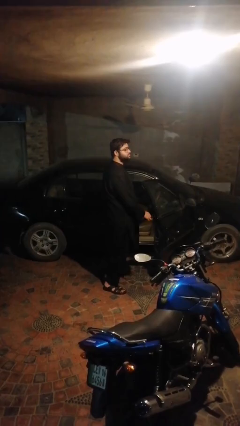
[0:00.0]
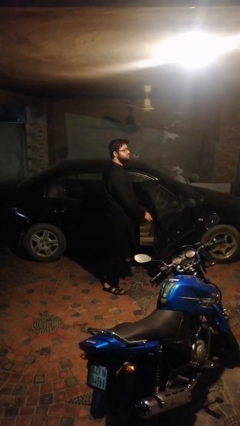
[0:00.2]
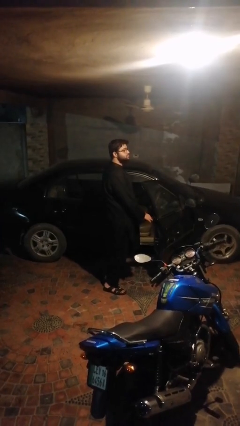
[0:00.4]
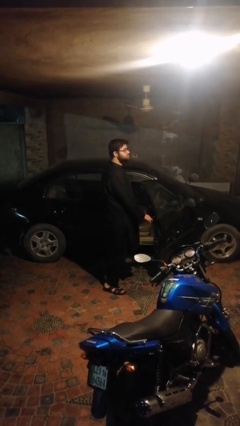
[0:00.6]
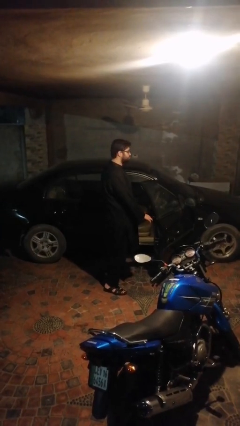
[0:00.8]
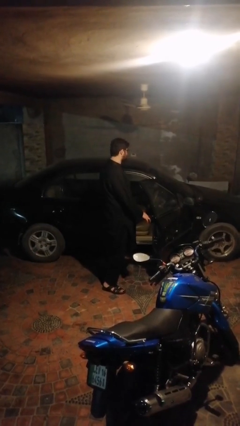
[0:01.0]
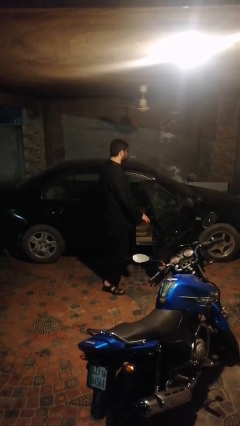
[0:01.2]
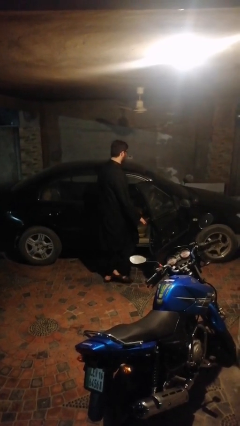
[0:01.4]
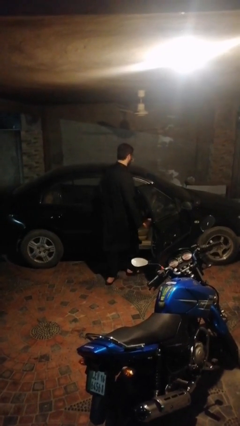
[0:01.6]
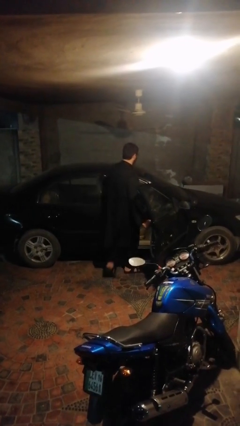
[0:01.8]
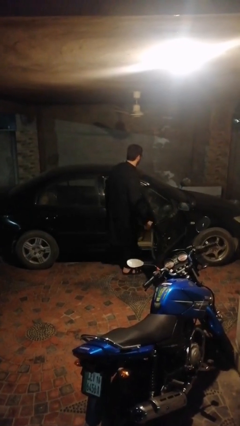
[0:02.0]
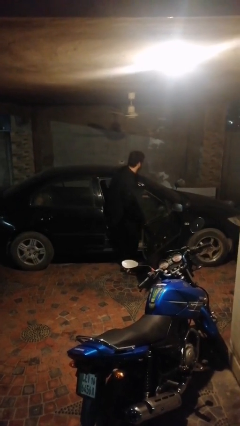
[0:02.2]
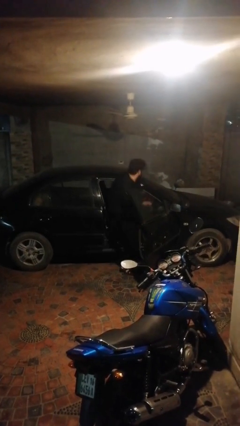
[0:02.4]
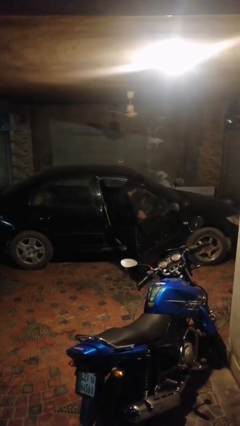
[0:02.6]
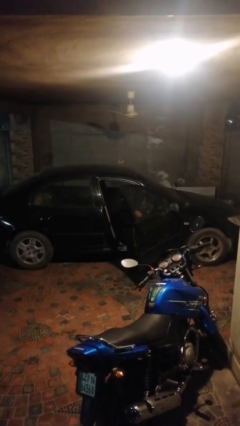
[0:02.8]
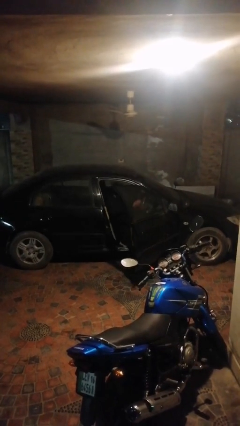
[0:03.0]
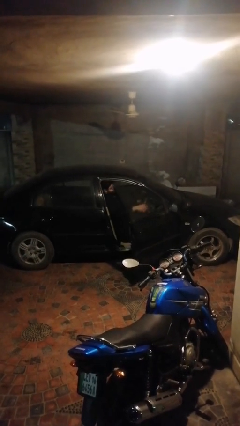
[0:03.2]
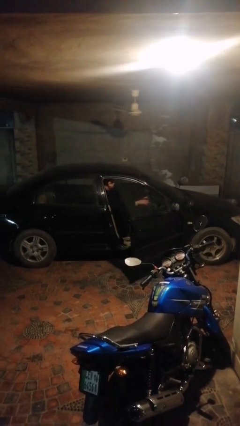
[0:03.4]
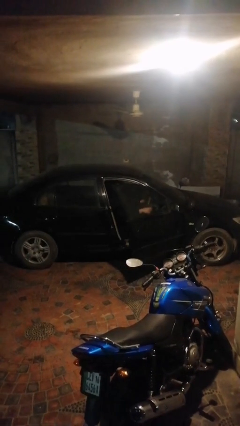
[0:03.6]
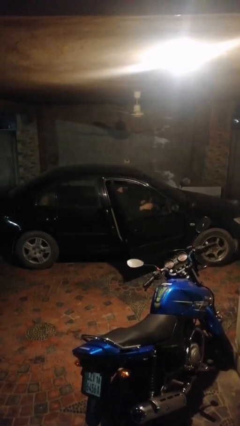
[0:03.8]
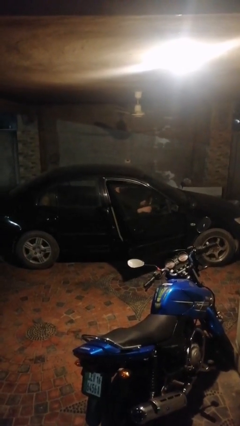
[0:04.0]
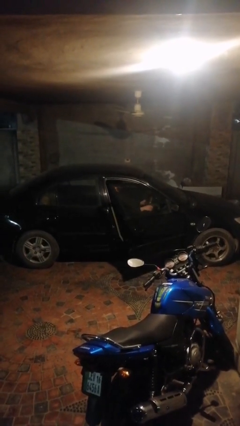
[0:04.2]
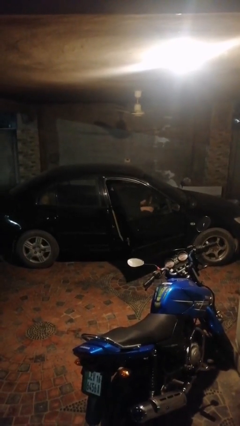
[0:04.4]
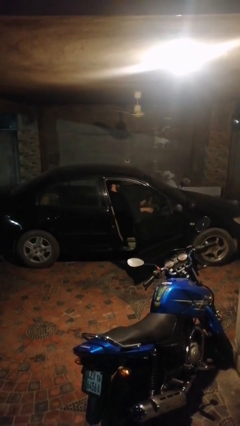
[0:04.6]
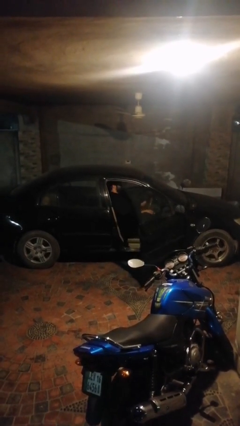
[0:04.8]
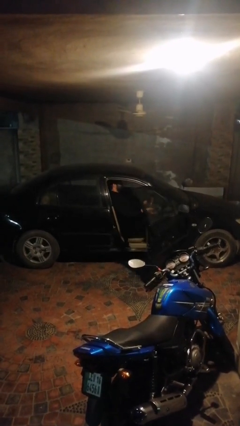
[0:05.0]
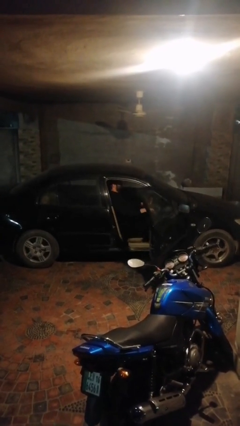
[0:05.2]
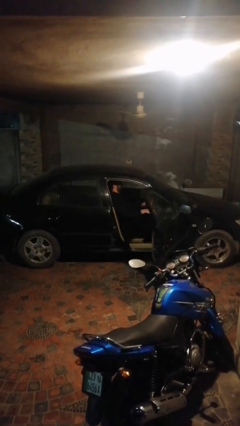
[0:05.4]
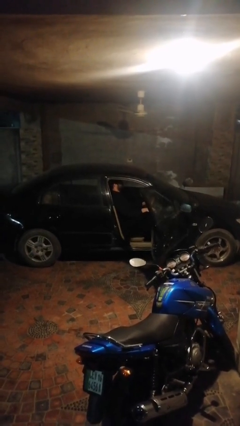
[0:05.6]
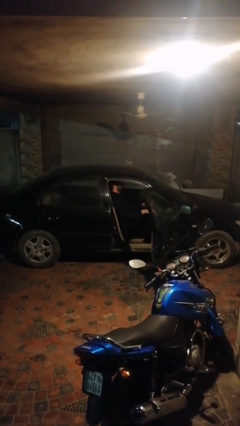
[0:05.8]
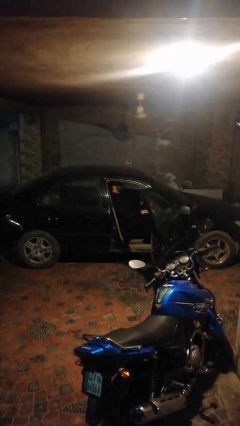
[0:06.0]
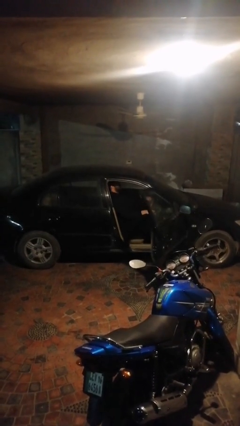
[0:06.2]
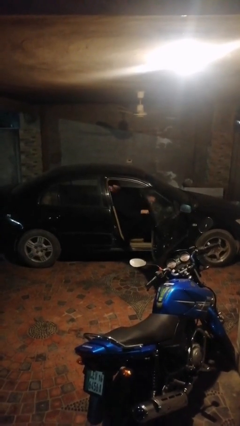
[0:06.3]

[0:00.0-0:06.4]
person enters car

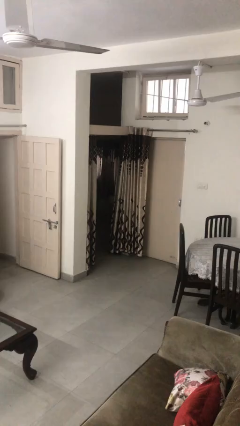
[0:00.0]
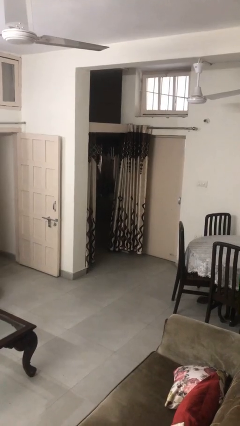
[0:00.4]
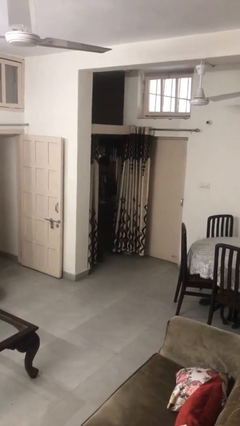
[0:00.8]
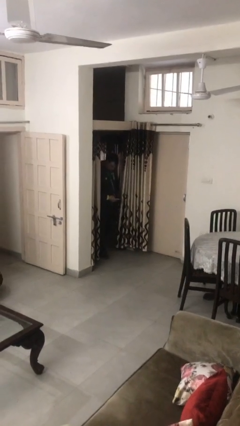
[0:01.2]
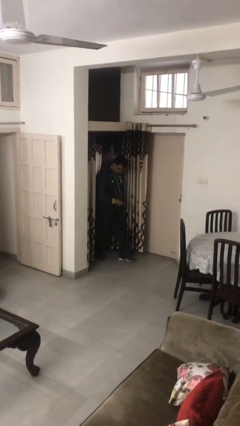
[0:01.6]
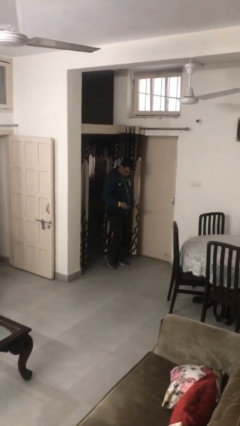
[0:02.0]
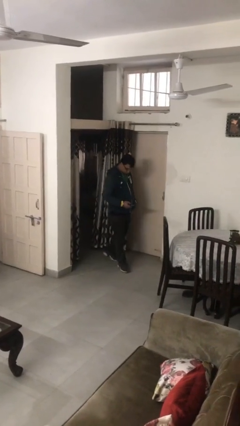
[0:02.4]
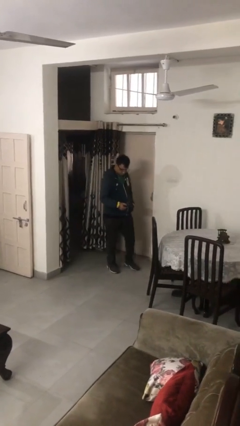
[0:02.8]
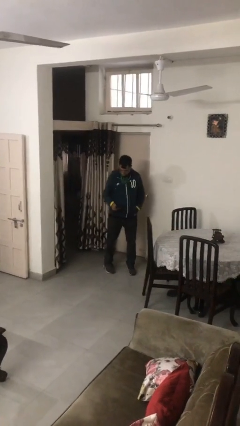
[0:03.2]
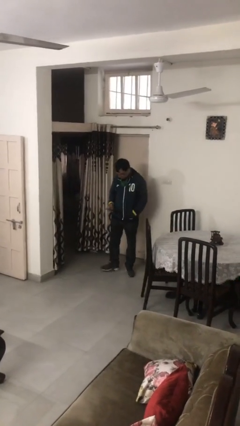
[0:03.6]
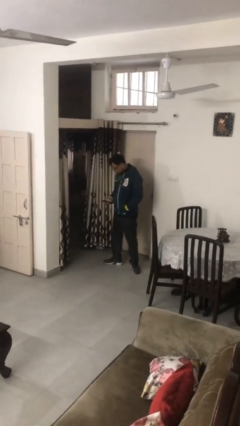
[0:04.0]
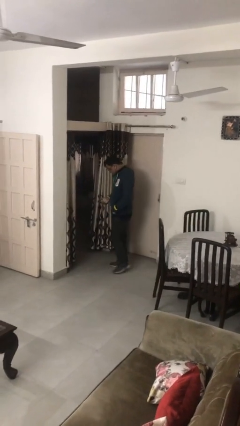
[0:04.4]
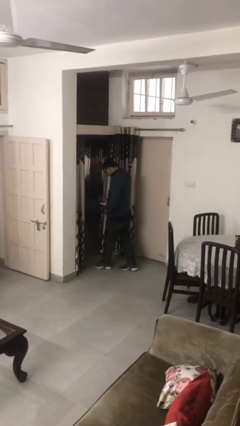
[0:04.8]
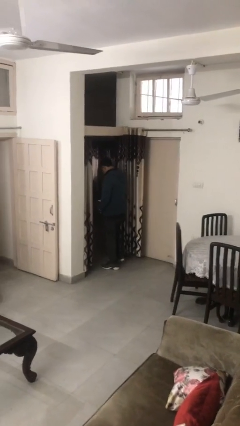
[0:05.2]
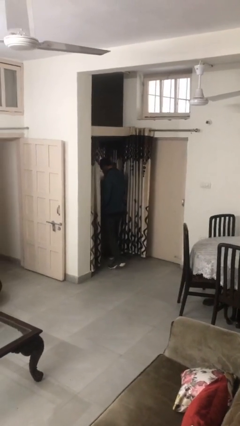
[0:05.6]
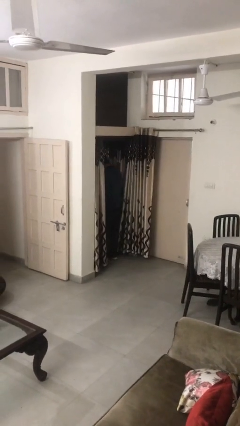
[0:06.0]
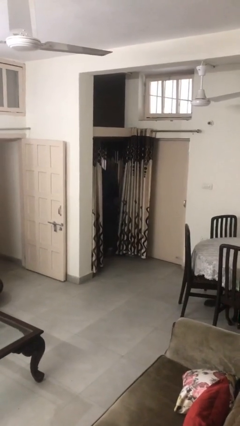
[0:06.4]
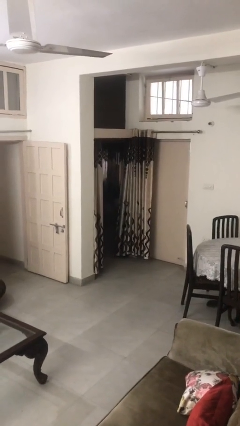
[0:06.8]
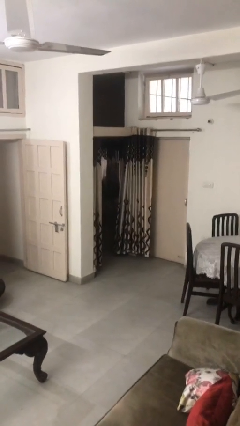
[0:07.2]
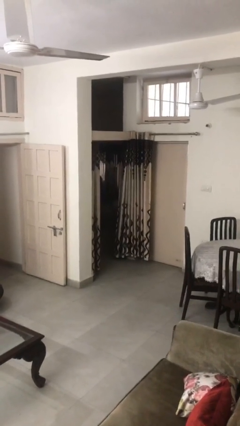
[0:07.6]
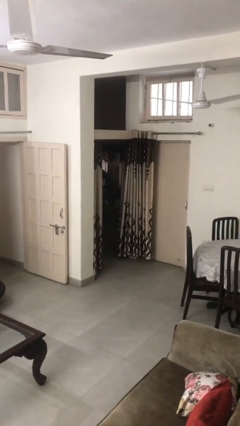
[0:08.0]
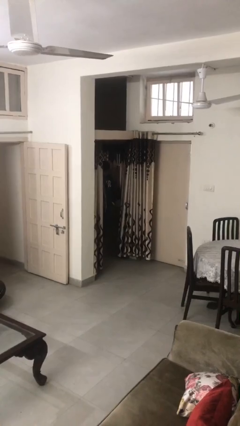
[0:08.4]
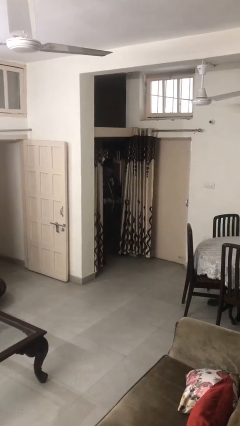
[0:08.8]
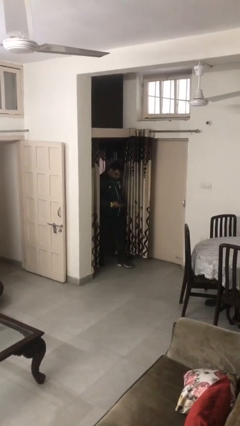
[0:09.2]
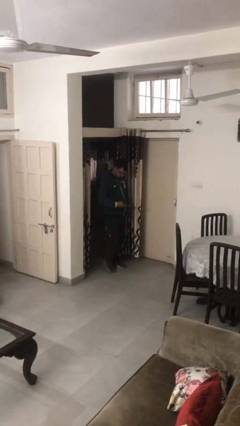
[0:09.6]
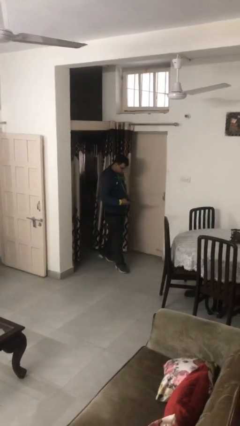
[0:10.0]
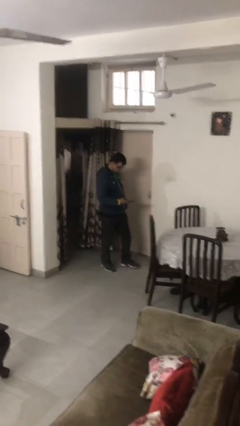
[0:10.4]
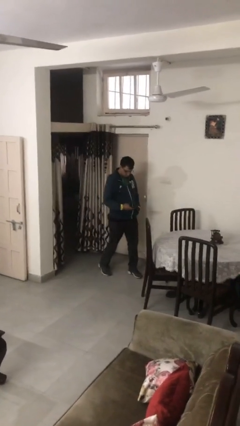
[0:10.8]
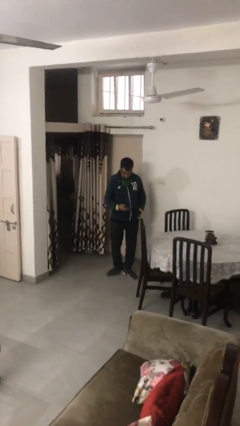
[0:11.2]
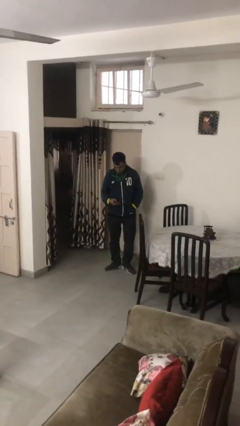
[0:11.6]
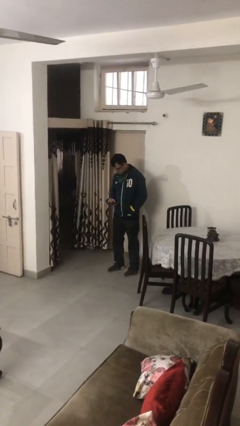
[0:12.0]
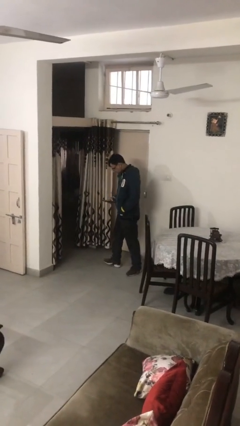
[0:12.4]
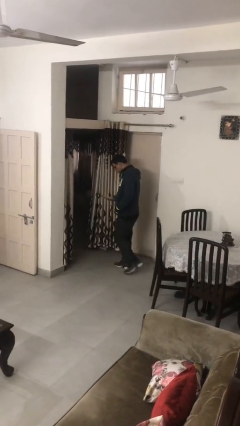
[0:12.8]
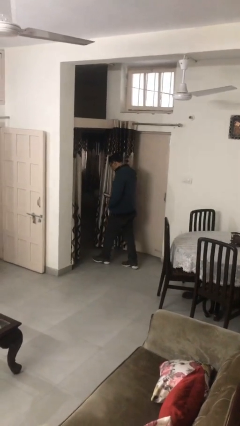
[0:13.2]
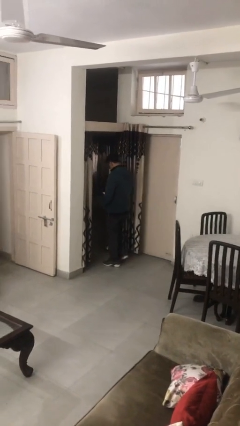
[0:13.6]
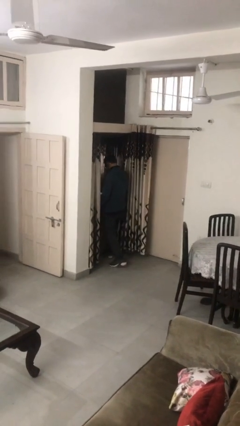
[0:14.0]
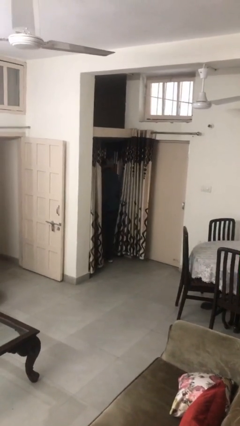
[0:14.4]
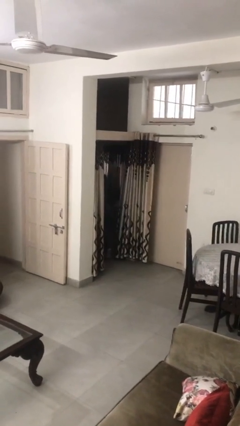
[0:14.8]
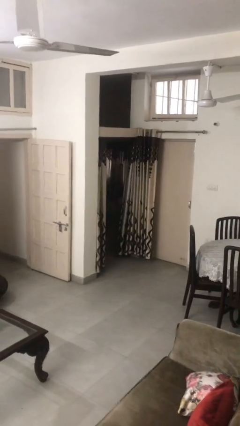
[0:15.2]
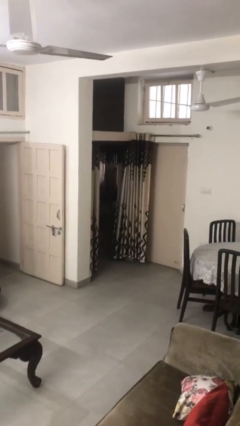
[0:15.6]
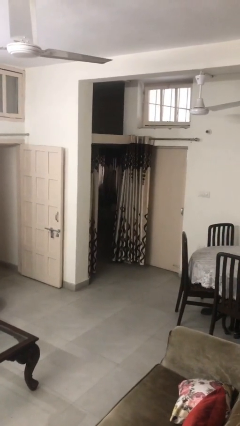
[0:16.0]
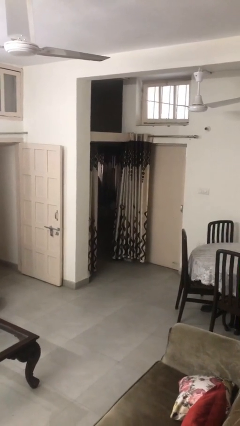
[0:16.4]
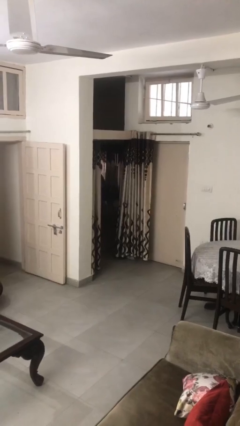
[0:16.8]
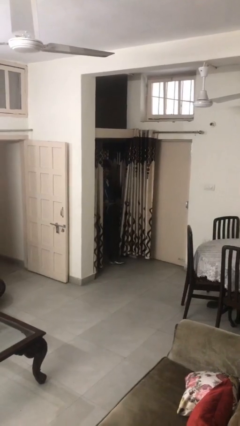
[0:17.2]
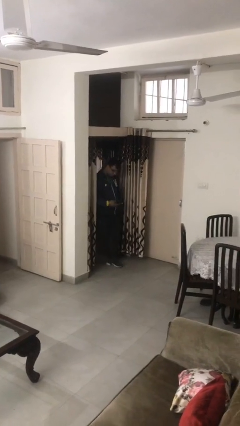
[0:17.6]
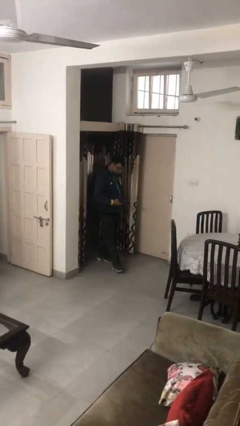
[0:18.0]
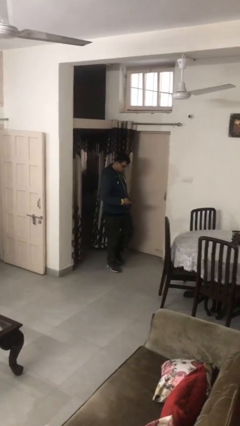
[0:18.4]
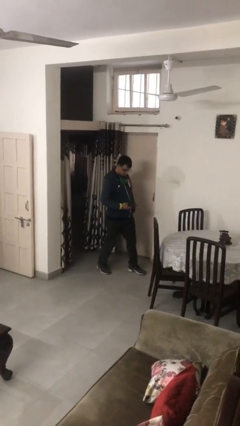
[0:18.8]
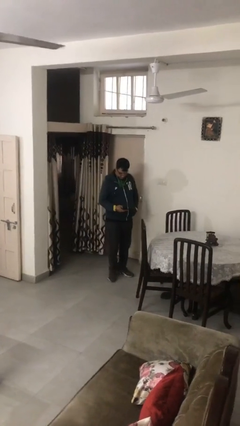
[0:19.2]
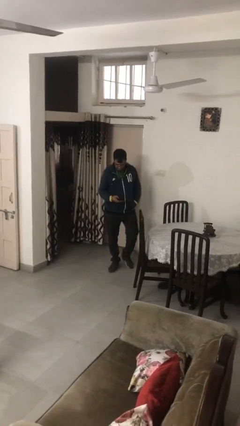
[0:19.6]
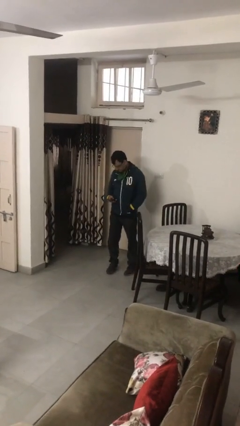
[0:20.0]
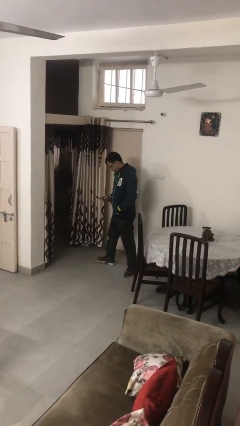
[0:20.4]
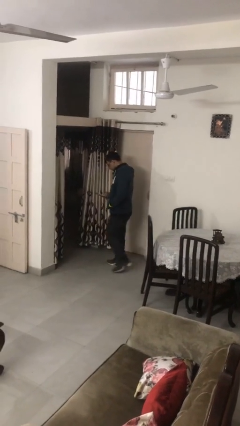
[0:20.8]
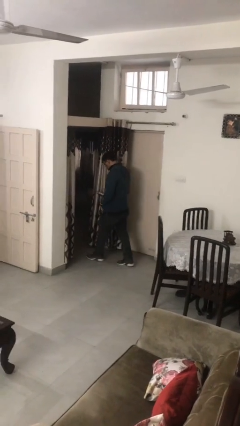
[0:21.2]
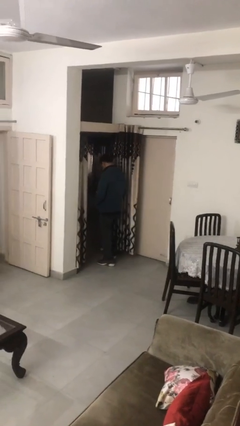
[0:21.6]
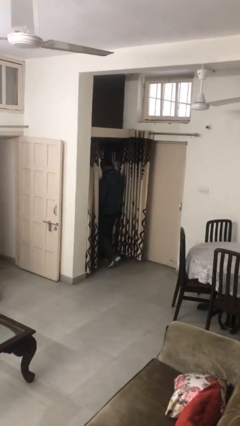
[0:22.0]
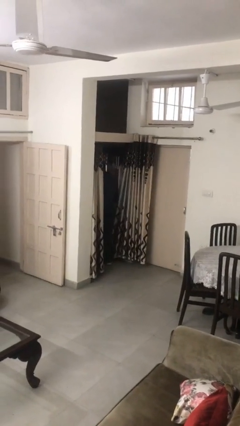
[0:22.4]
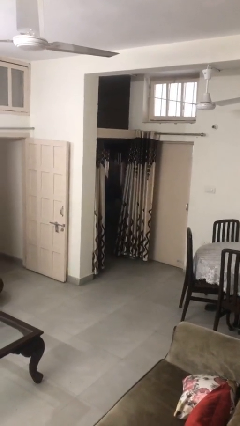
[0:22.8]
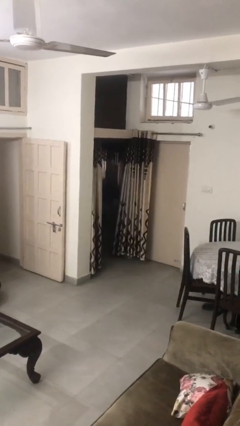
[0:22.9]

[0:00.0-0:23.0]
person texts on phone
